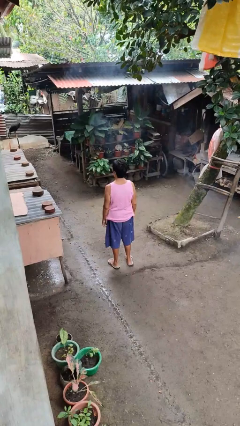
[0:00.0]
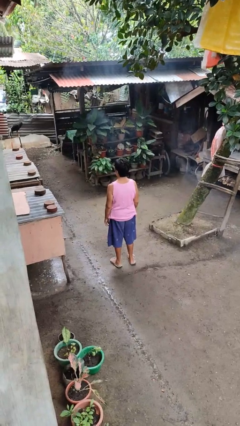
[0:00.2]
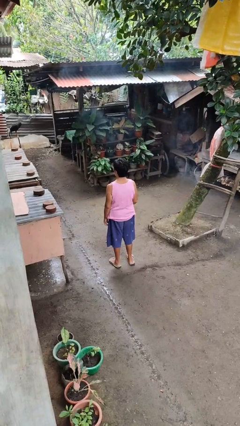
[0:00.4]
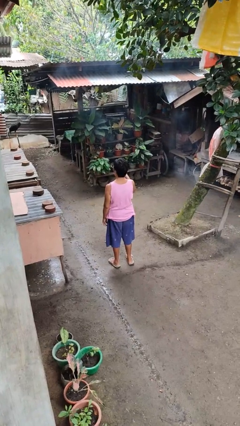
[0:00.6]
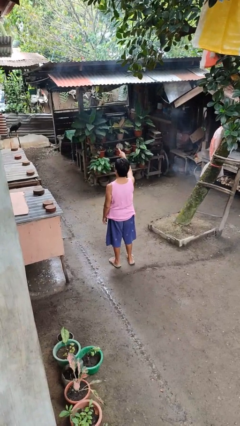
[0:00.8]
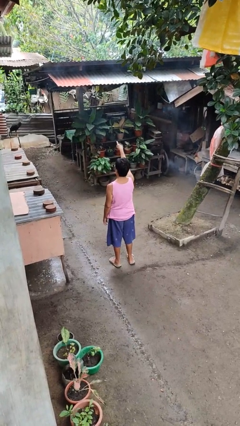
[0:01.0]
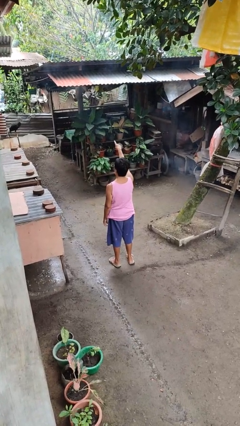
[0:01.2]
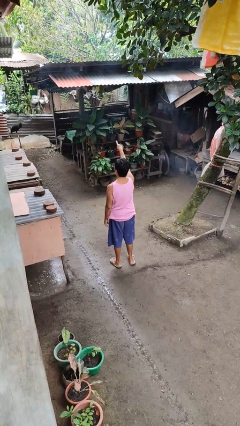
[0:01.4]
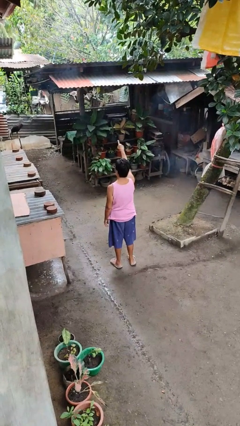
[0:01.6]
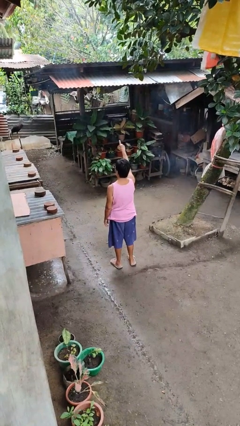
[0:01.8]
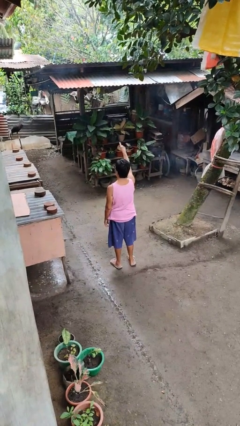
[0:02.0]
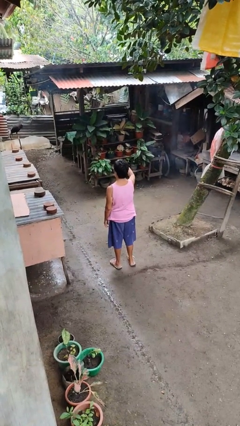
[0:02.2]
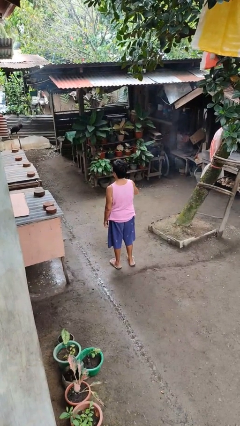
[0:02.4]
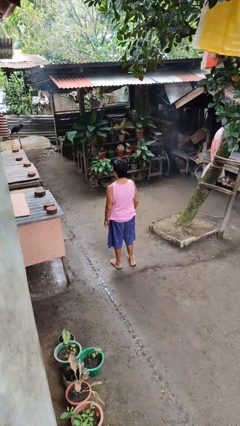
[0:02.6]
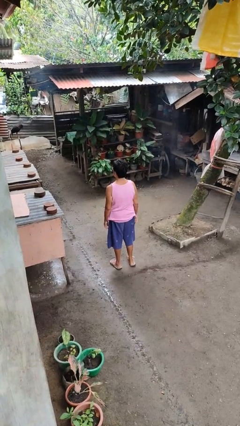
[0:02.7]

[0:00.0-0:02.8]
person points at person

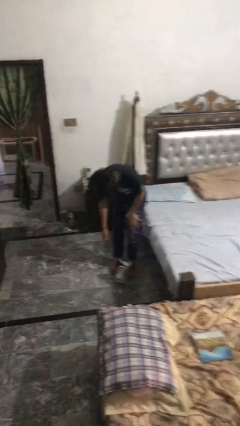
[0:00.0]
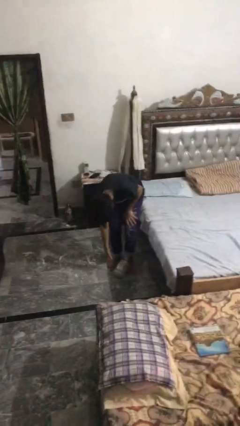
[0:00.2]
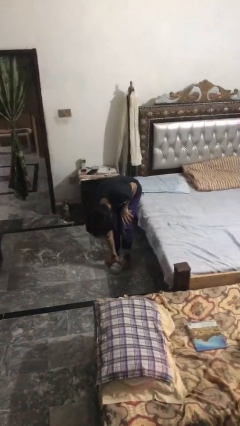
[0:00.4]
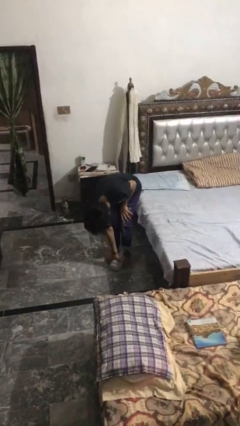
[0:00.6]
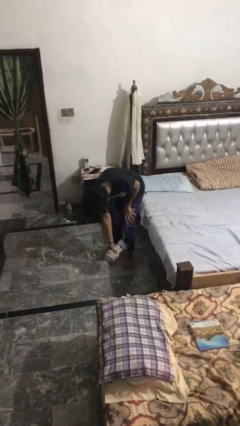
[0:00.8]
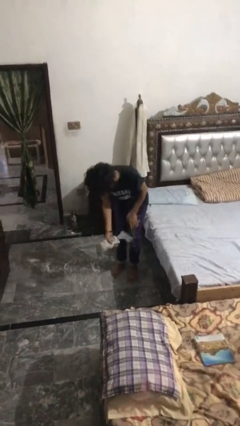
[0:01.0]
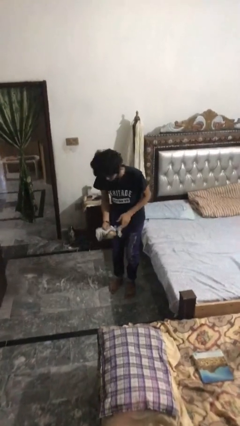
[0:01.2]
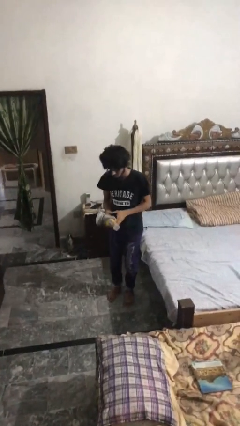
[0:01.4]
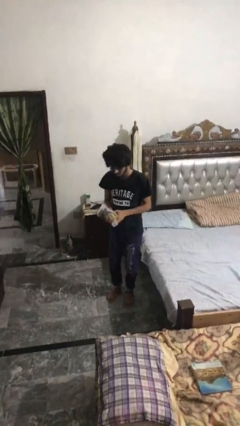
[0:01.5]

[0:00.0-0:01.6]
person picks up object from floor

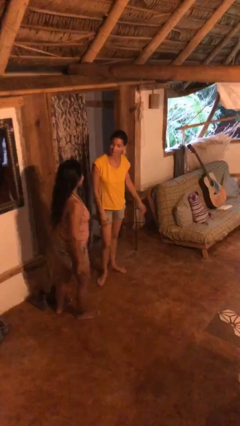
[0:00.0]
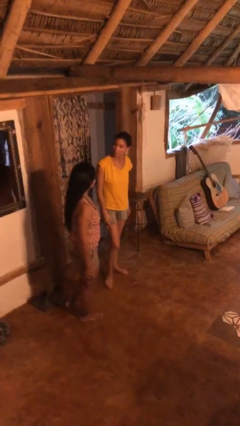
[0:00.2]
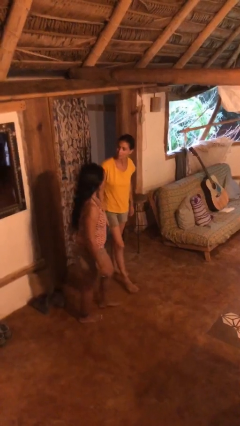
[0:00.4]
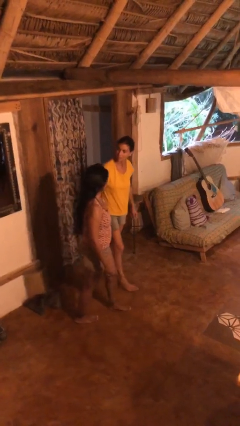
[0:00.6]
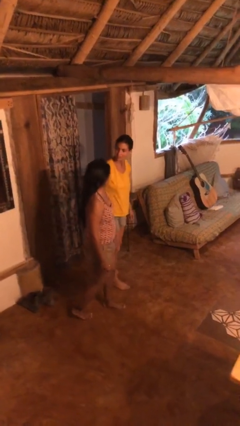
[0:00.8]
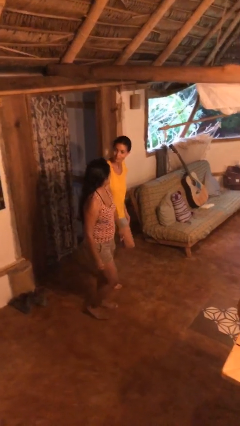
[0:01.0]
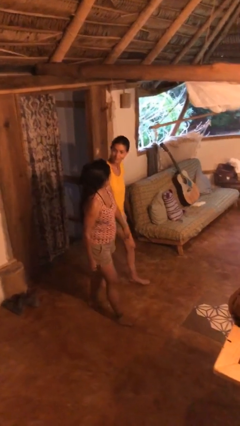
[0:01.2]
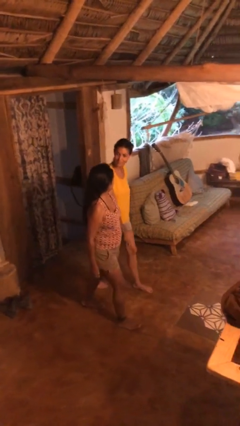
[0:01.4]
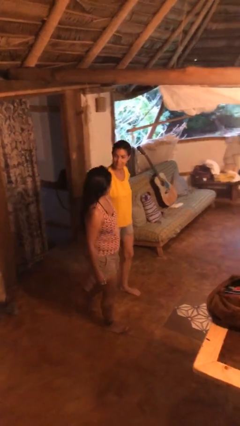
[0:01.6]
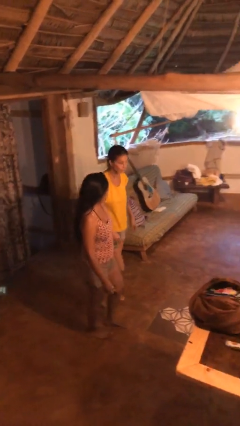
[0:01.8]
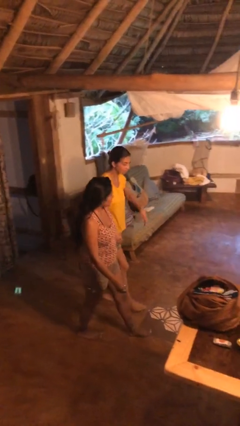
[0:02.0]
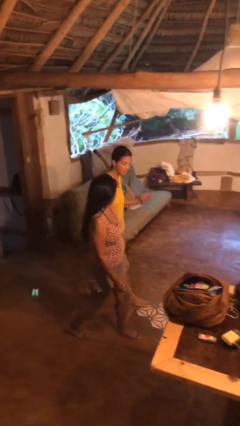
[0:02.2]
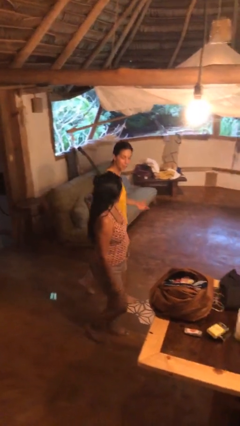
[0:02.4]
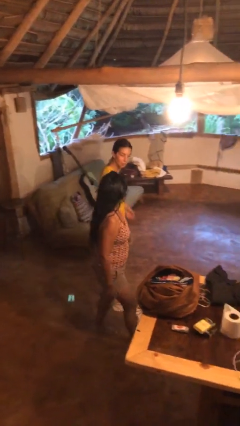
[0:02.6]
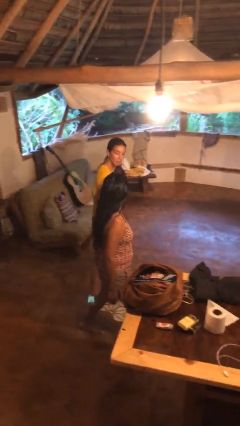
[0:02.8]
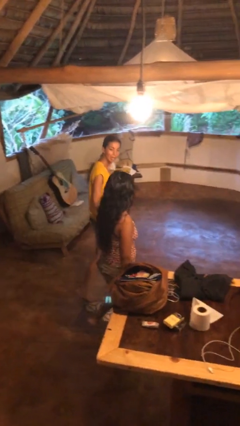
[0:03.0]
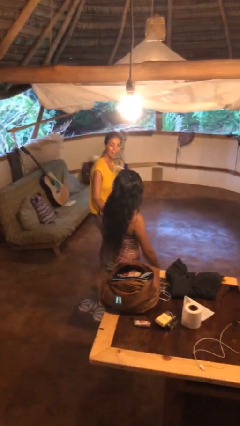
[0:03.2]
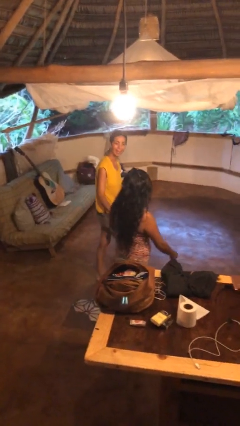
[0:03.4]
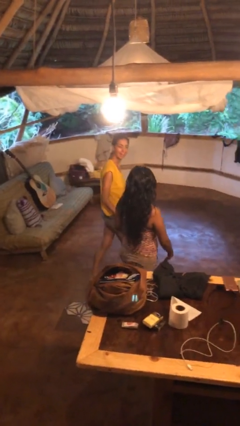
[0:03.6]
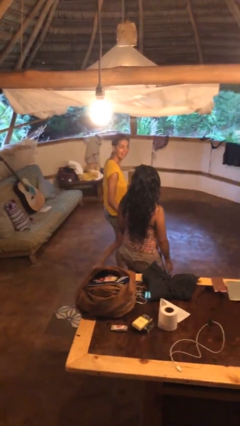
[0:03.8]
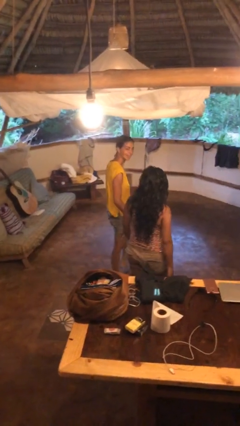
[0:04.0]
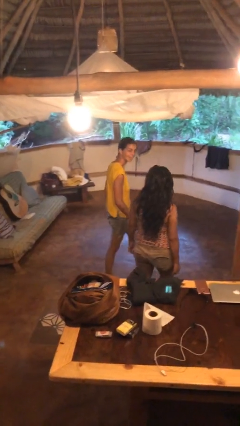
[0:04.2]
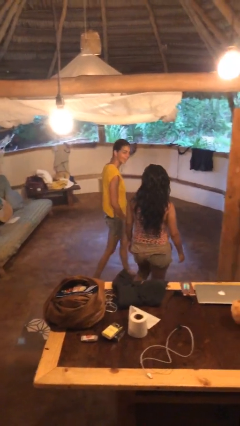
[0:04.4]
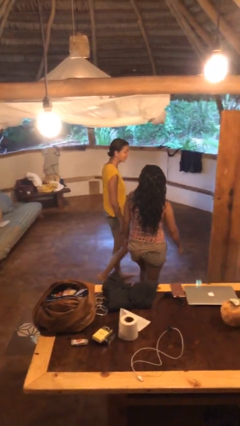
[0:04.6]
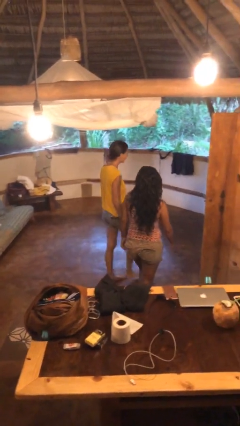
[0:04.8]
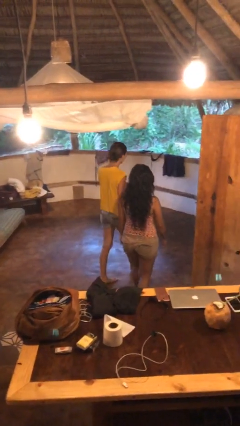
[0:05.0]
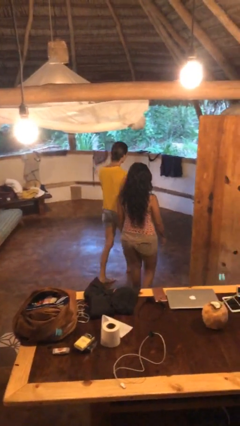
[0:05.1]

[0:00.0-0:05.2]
person talks to person

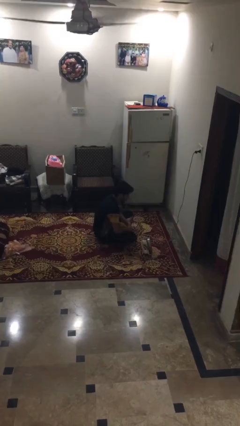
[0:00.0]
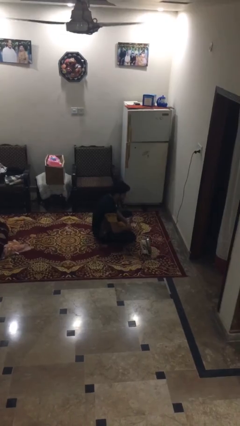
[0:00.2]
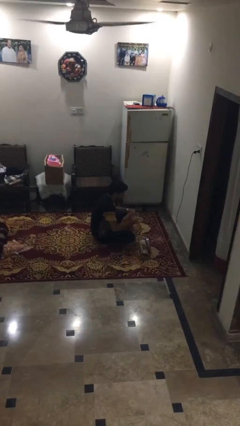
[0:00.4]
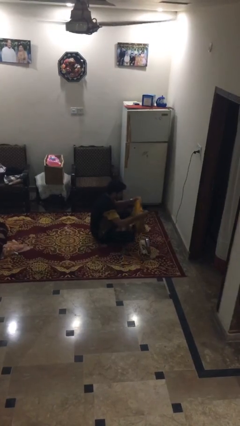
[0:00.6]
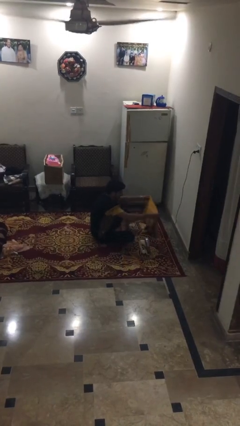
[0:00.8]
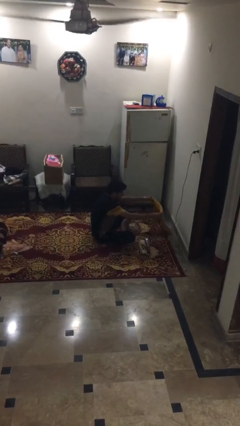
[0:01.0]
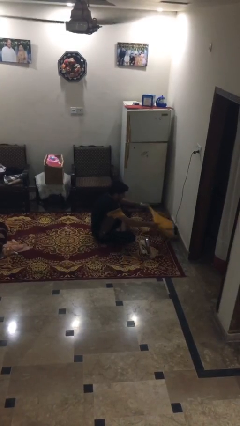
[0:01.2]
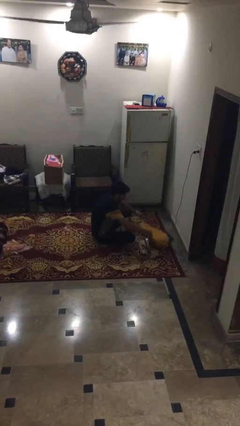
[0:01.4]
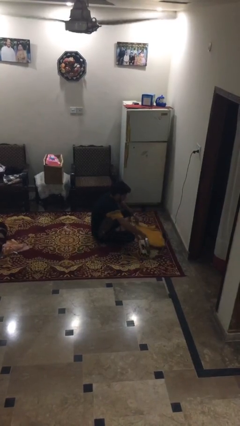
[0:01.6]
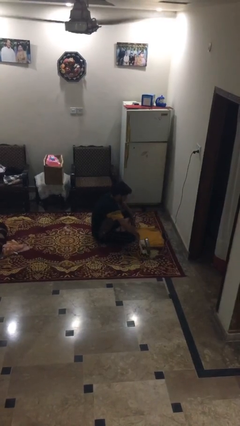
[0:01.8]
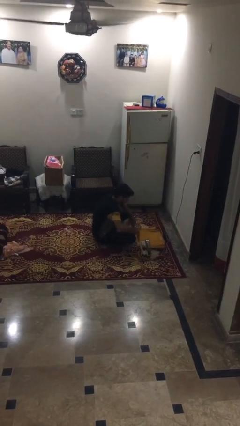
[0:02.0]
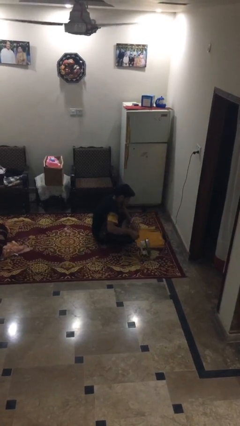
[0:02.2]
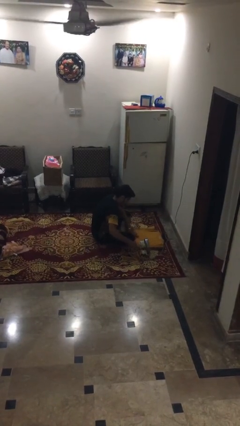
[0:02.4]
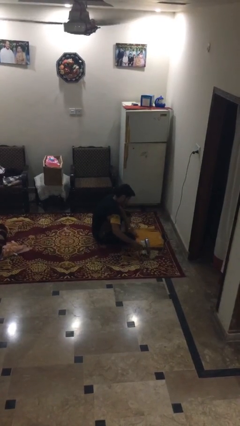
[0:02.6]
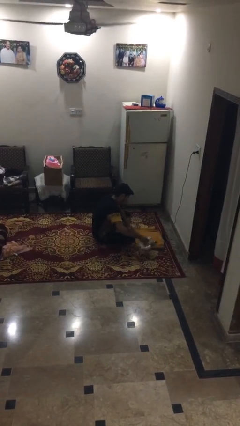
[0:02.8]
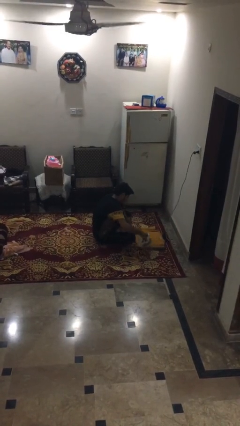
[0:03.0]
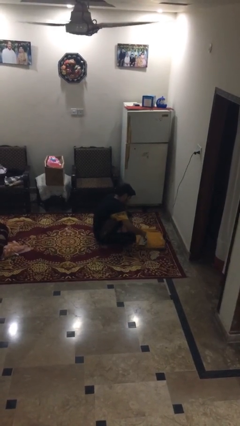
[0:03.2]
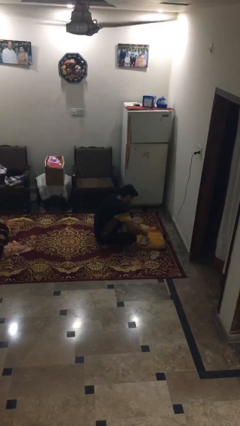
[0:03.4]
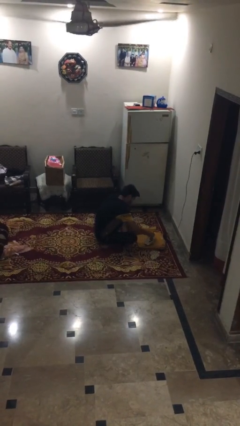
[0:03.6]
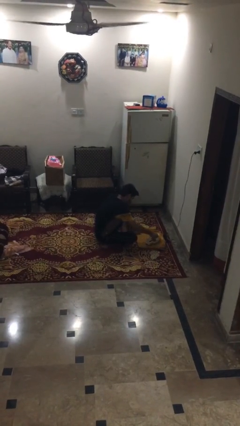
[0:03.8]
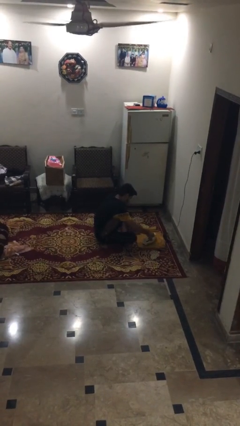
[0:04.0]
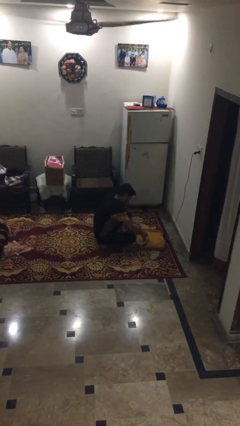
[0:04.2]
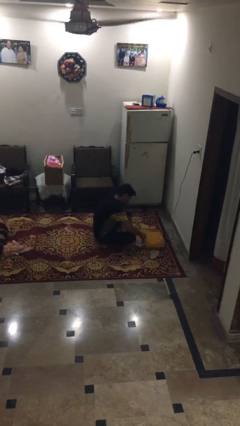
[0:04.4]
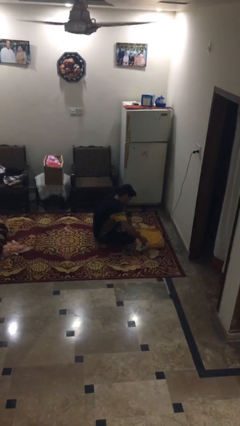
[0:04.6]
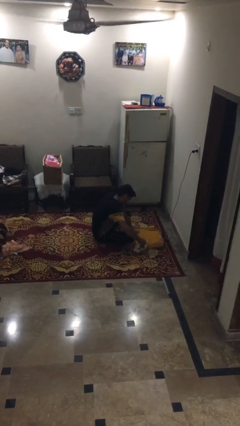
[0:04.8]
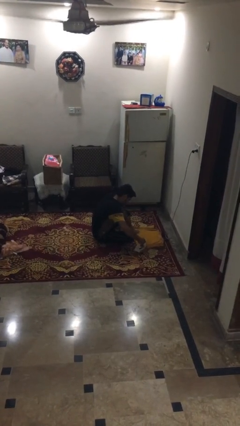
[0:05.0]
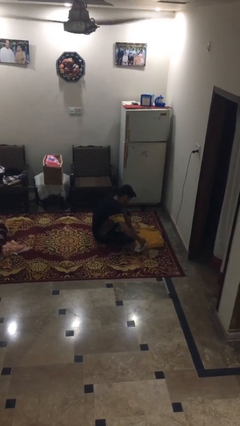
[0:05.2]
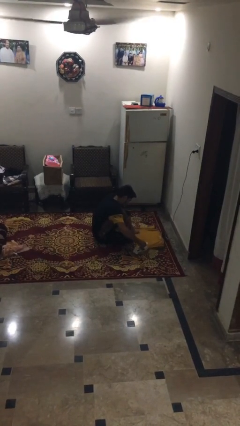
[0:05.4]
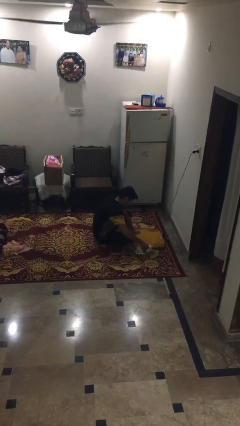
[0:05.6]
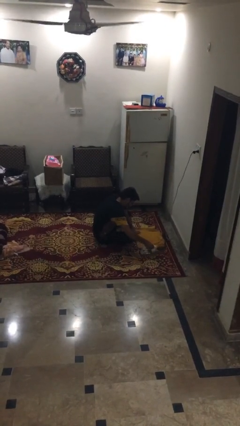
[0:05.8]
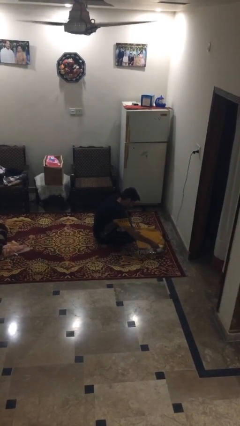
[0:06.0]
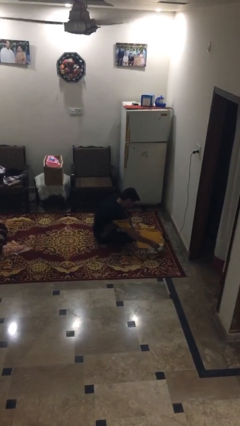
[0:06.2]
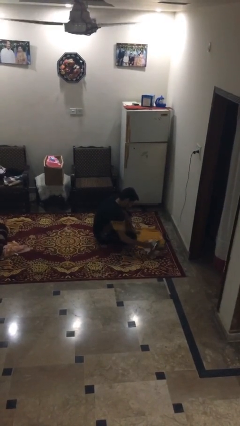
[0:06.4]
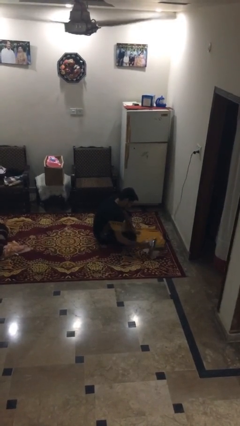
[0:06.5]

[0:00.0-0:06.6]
person irons clothes

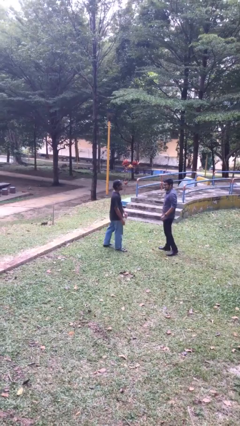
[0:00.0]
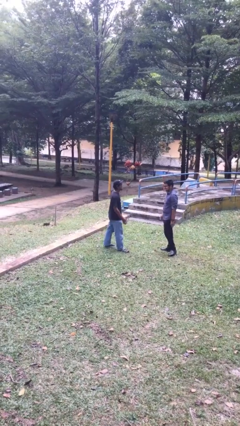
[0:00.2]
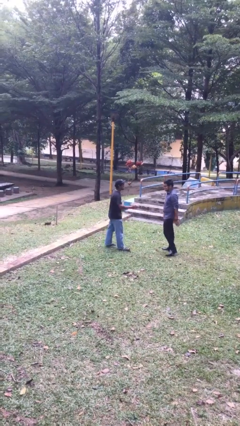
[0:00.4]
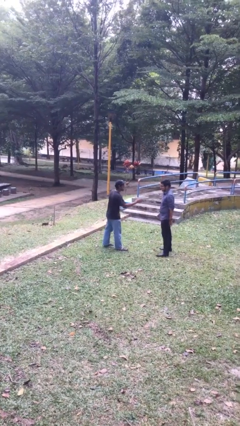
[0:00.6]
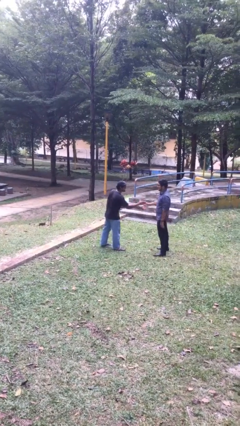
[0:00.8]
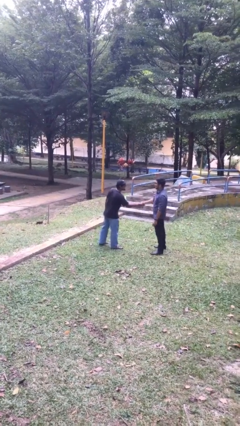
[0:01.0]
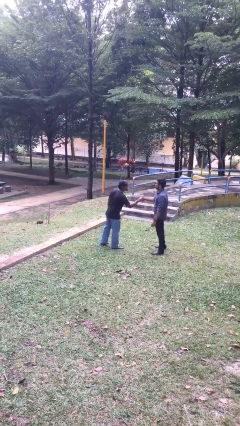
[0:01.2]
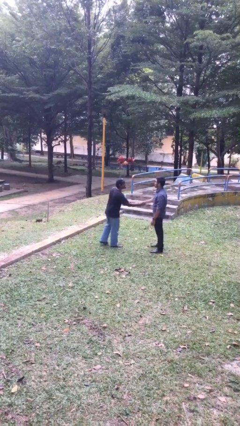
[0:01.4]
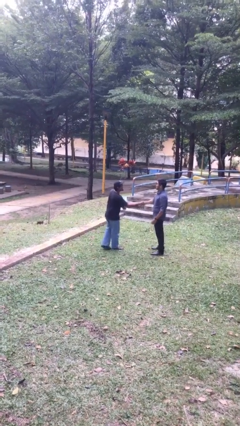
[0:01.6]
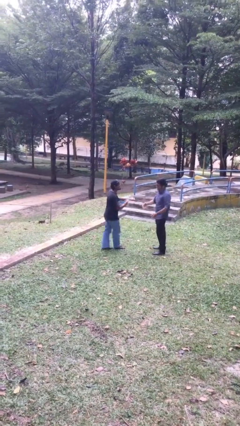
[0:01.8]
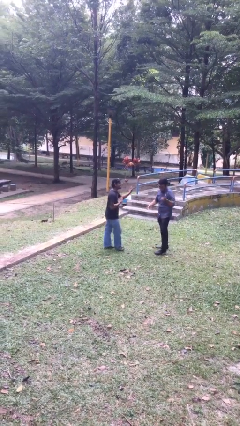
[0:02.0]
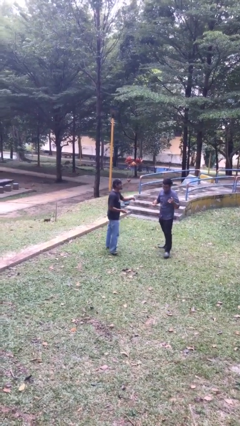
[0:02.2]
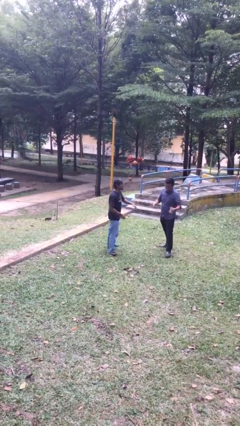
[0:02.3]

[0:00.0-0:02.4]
person shakes hand
